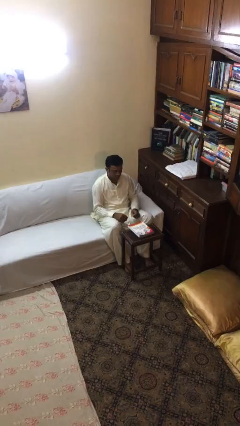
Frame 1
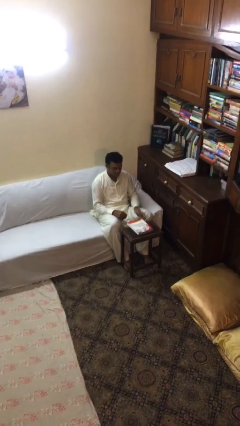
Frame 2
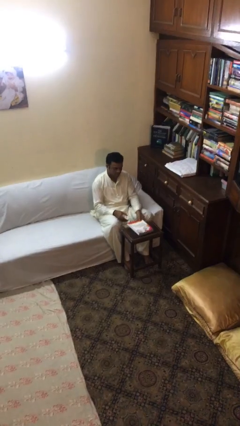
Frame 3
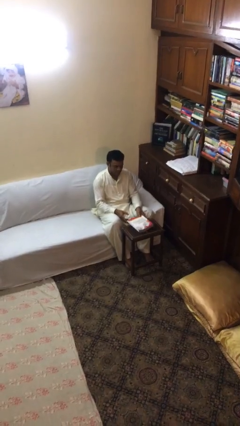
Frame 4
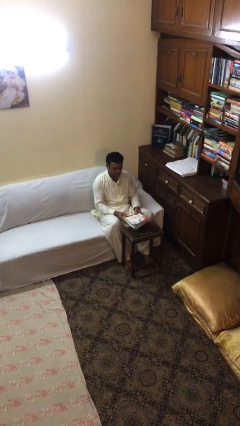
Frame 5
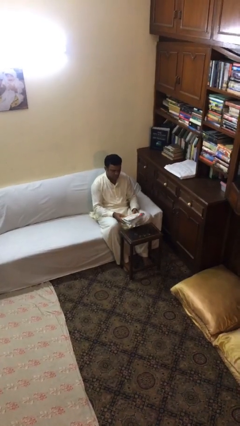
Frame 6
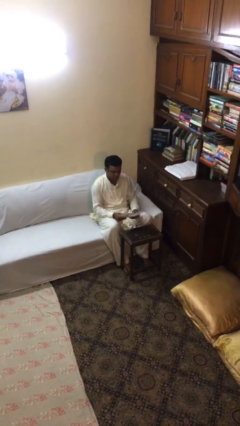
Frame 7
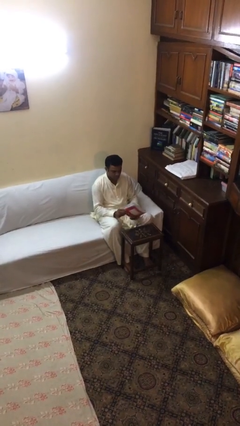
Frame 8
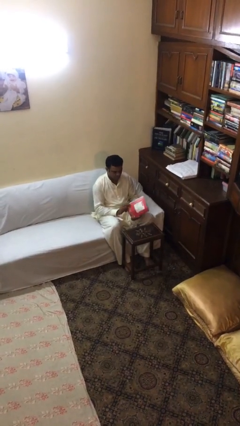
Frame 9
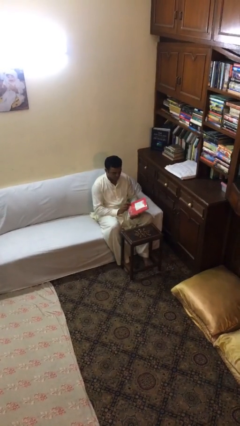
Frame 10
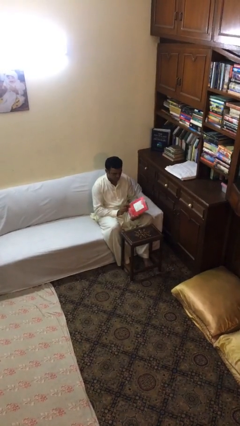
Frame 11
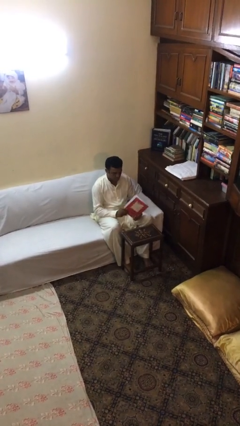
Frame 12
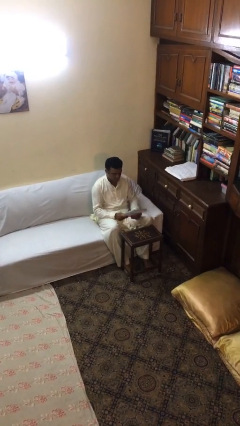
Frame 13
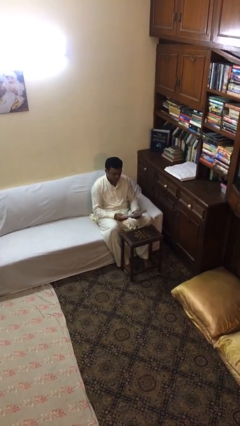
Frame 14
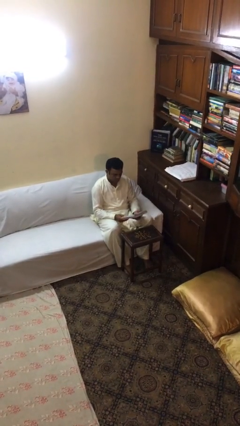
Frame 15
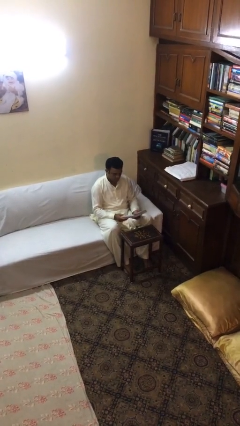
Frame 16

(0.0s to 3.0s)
person picks up object from table

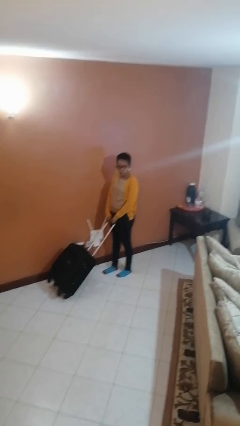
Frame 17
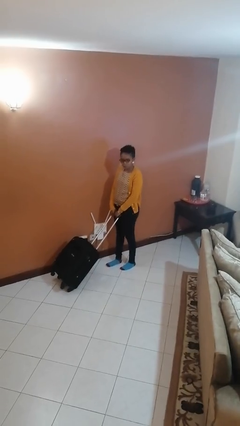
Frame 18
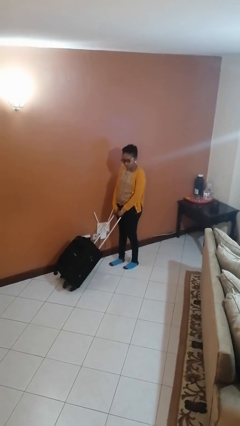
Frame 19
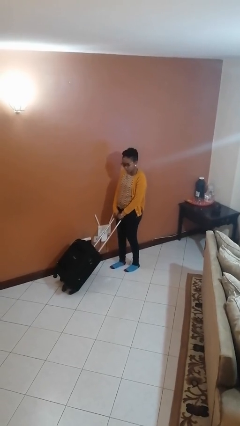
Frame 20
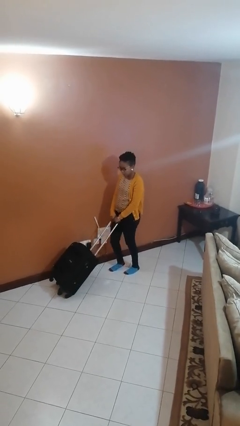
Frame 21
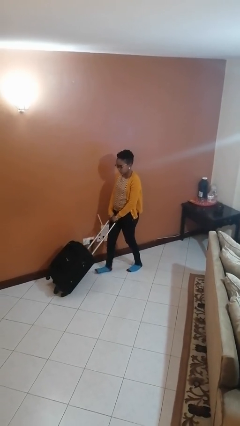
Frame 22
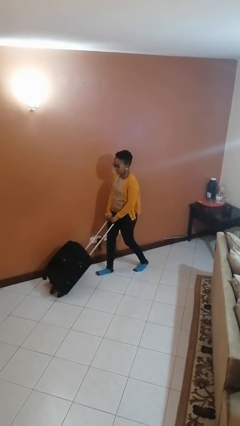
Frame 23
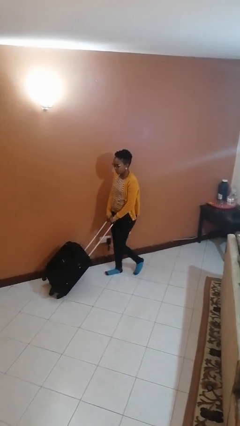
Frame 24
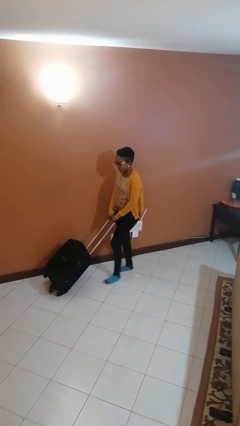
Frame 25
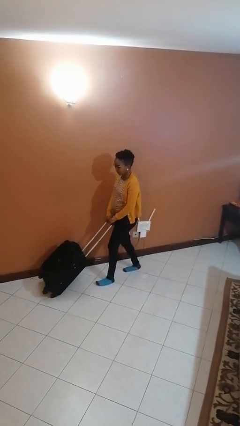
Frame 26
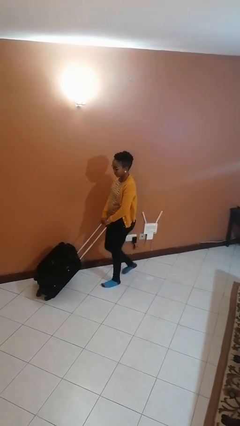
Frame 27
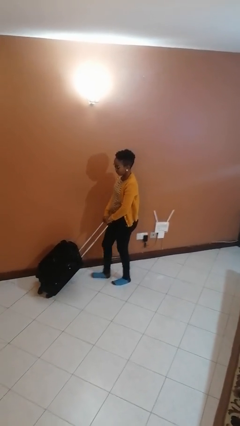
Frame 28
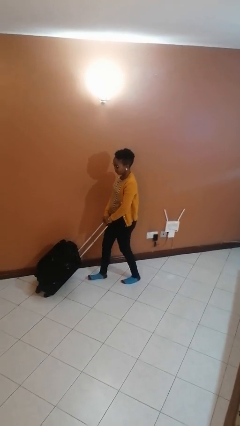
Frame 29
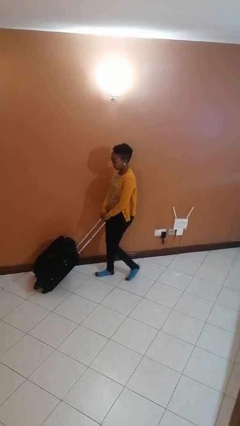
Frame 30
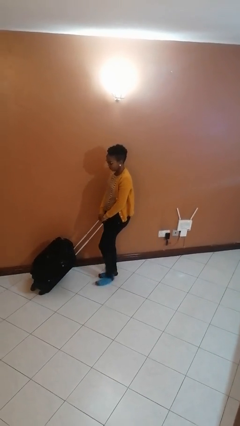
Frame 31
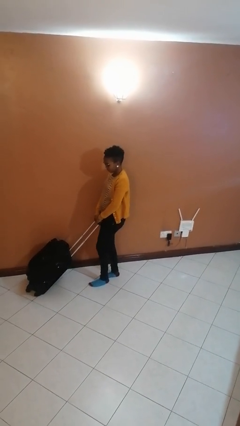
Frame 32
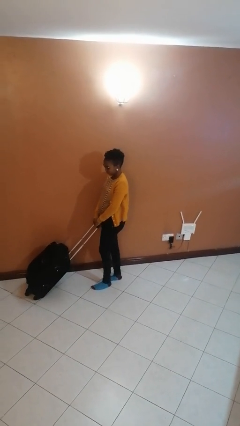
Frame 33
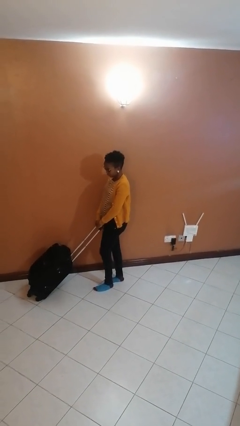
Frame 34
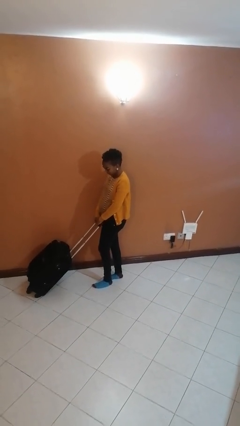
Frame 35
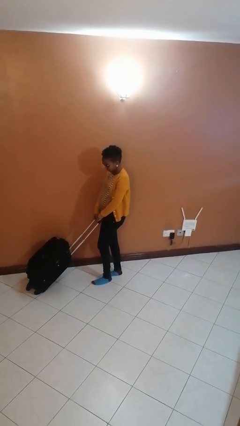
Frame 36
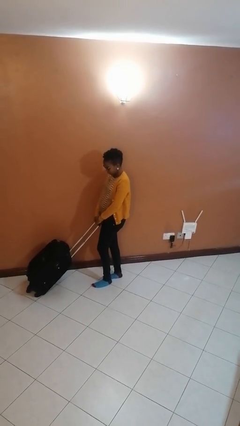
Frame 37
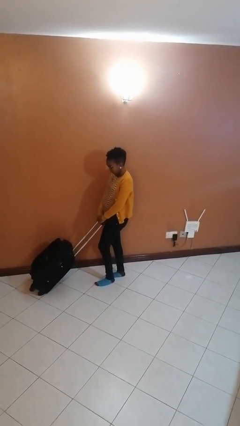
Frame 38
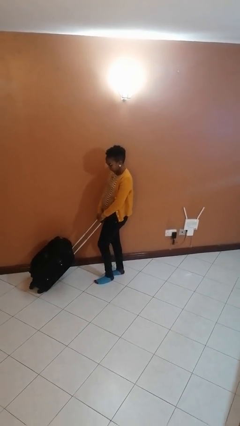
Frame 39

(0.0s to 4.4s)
person pushes wheeled cart

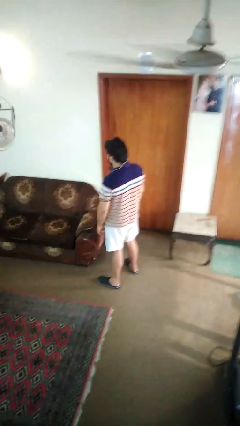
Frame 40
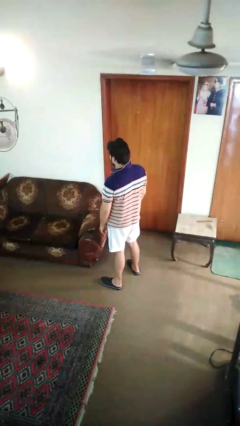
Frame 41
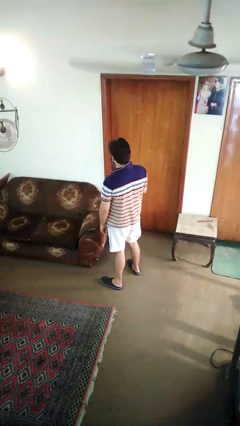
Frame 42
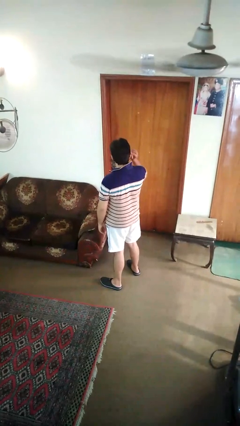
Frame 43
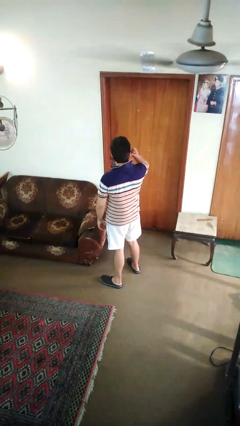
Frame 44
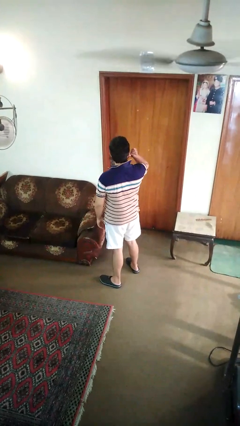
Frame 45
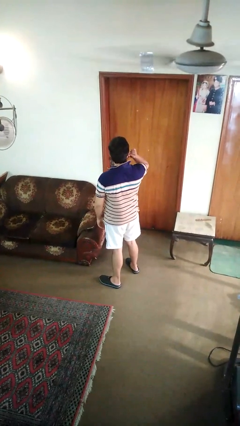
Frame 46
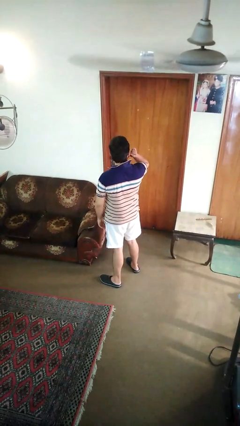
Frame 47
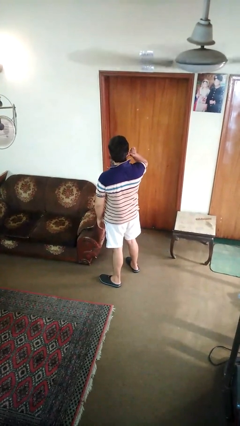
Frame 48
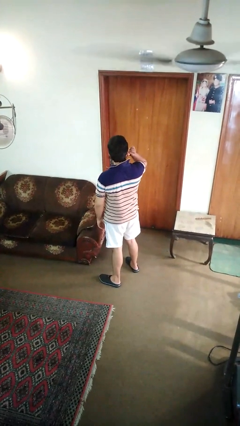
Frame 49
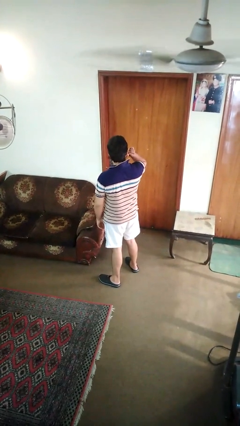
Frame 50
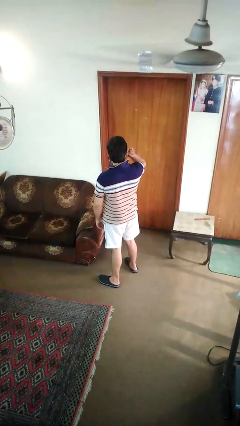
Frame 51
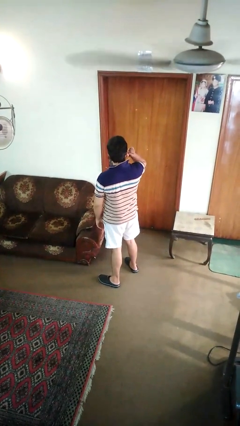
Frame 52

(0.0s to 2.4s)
person touches earlobe

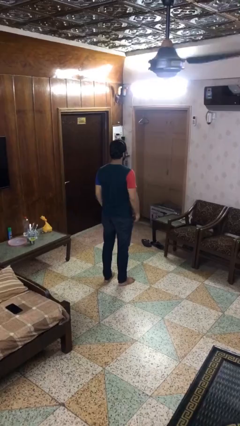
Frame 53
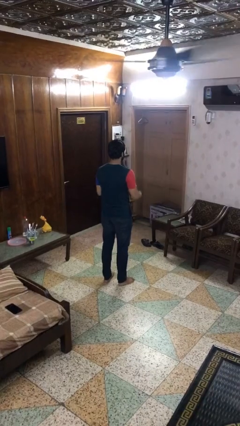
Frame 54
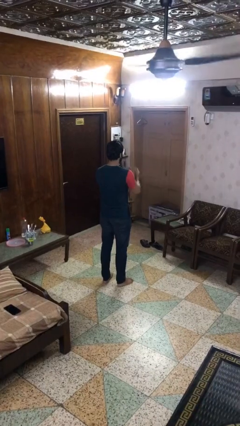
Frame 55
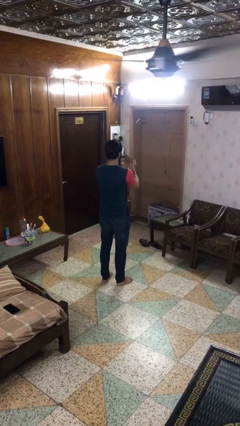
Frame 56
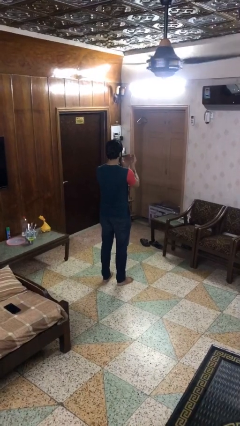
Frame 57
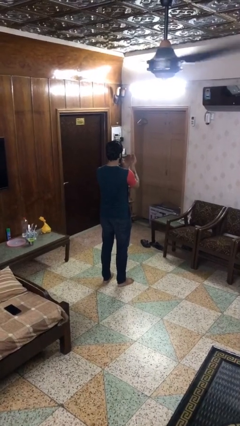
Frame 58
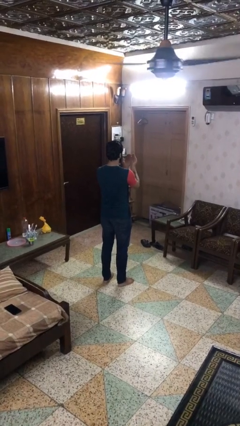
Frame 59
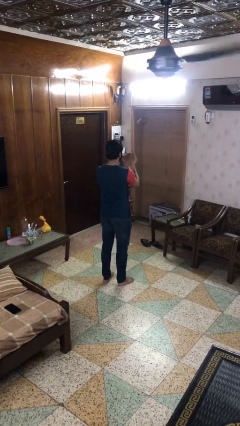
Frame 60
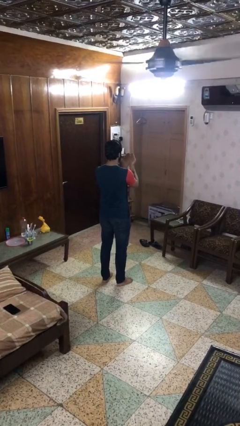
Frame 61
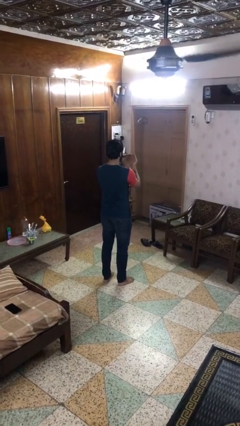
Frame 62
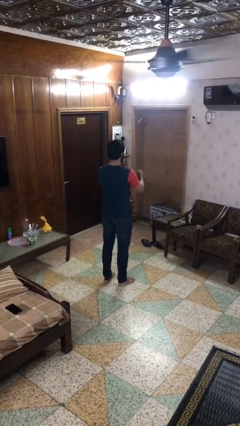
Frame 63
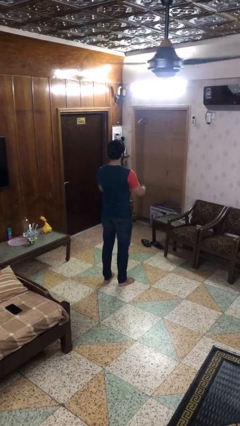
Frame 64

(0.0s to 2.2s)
person prays

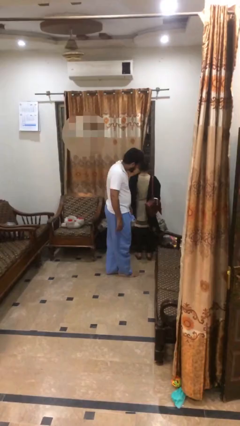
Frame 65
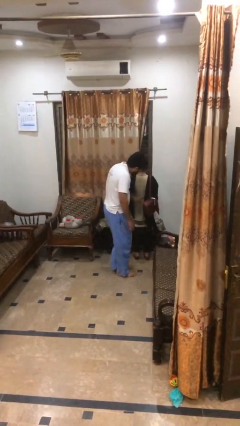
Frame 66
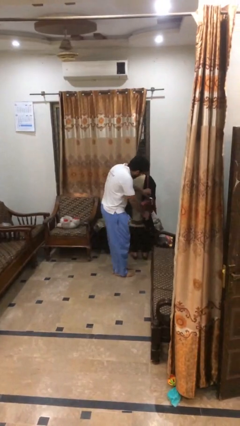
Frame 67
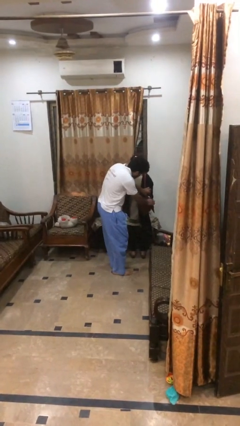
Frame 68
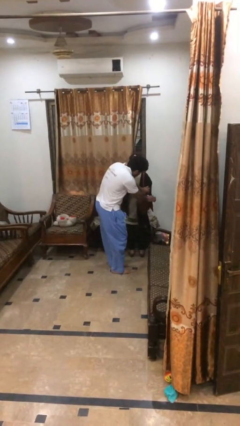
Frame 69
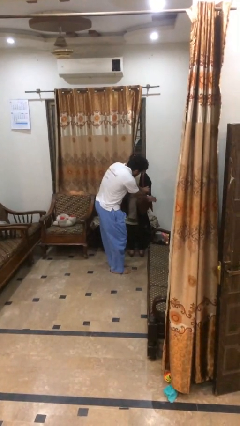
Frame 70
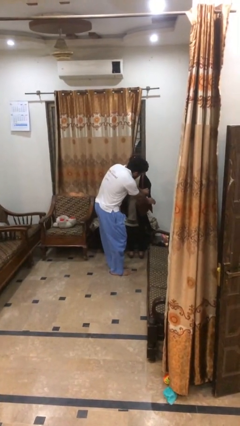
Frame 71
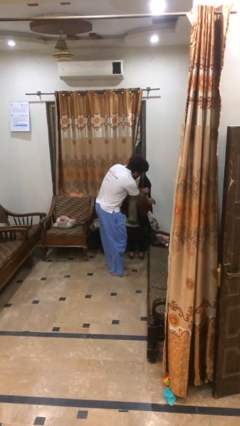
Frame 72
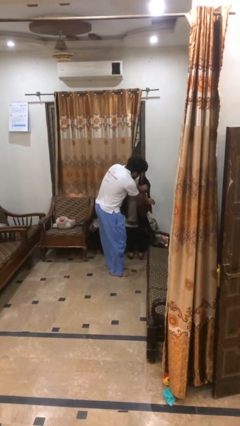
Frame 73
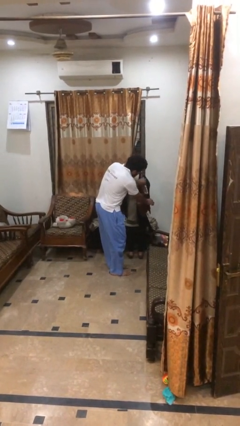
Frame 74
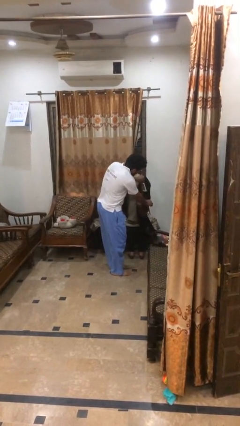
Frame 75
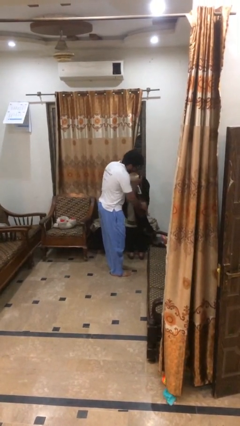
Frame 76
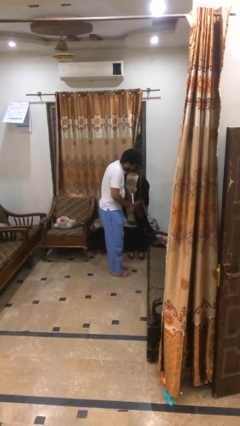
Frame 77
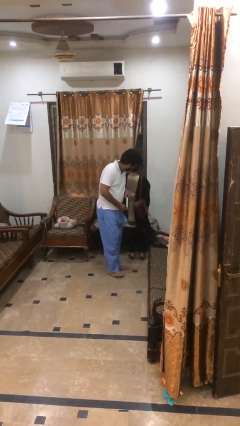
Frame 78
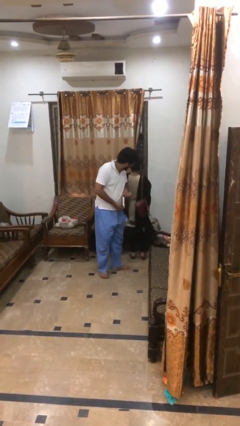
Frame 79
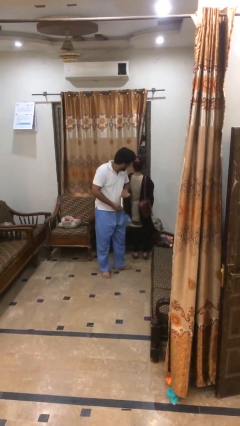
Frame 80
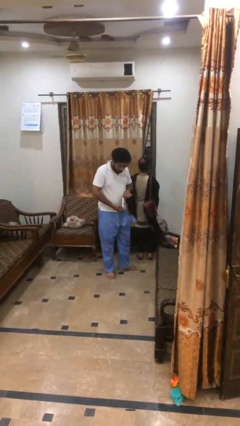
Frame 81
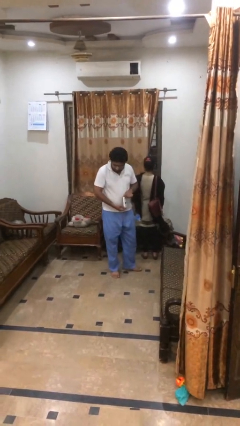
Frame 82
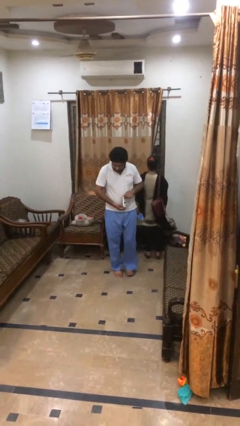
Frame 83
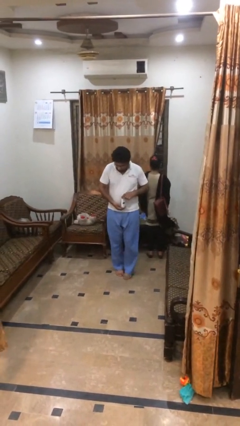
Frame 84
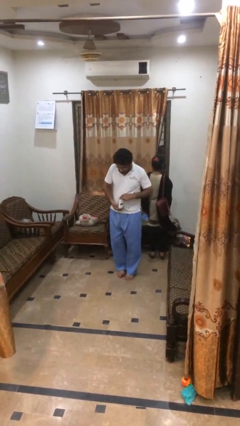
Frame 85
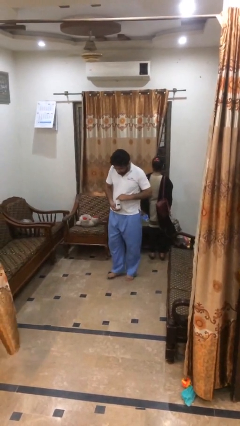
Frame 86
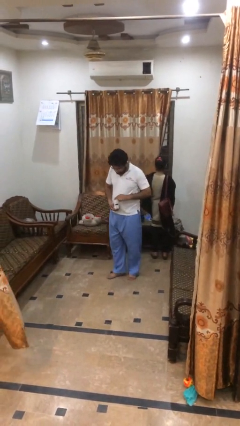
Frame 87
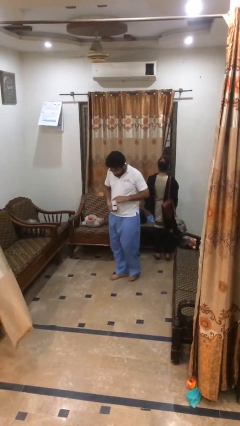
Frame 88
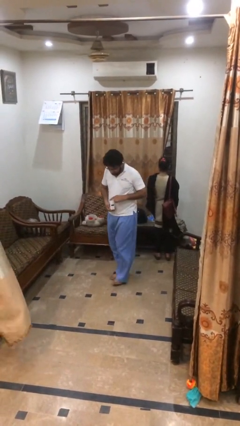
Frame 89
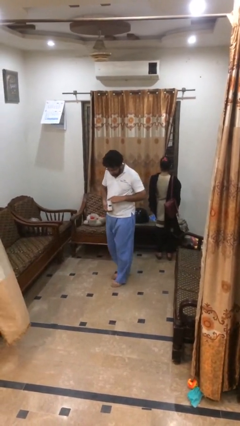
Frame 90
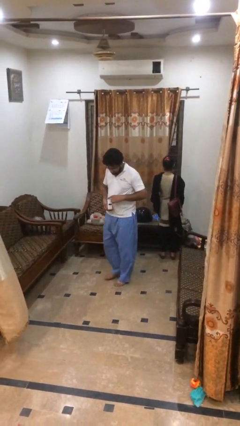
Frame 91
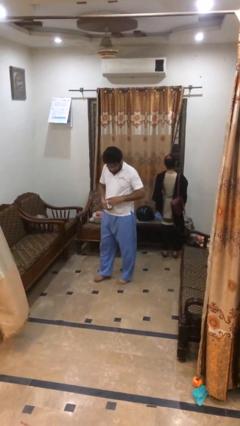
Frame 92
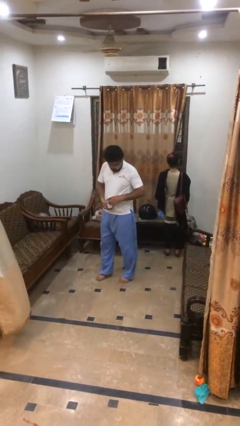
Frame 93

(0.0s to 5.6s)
person steals object from person
